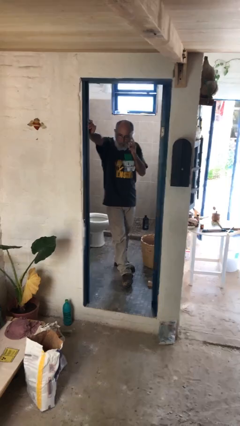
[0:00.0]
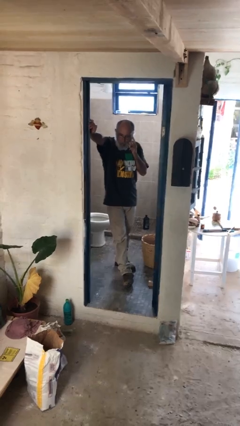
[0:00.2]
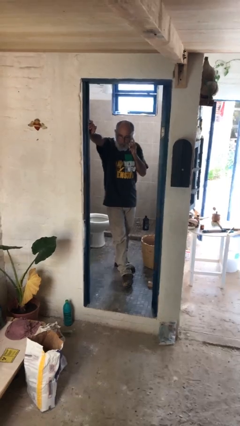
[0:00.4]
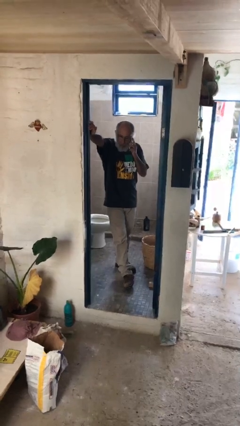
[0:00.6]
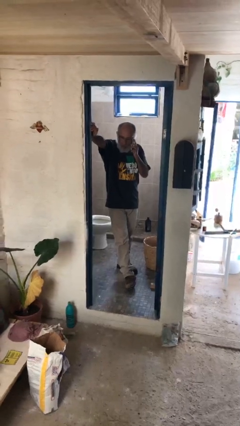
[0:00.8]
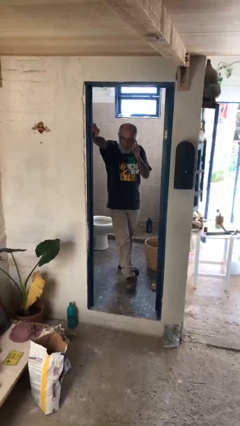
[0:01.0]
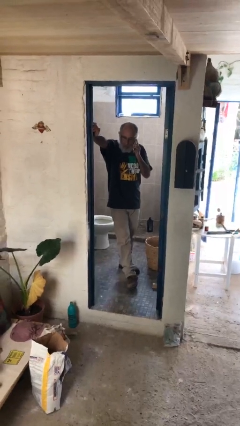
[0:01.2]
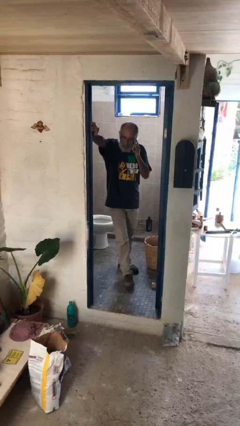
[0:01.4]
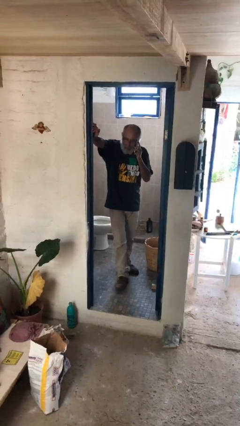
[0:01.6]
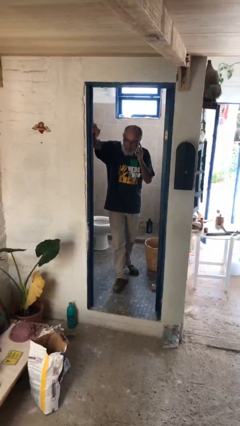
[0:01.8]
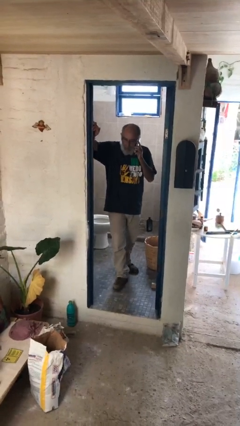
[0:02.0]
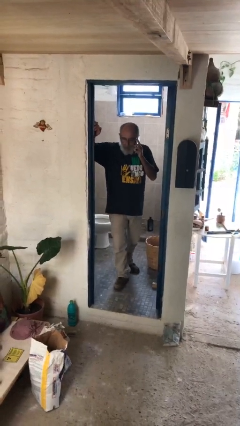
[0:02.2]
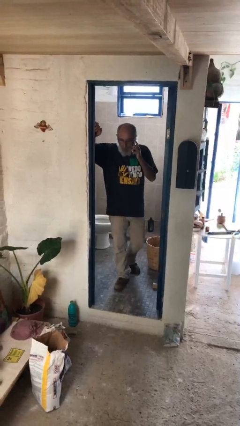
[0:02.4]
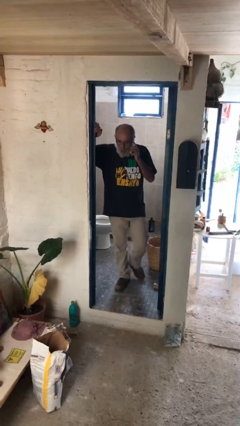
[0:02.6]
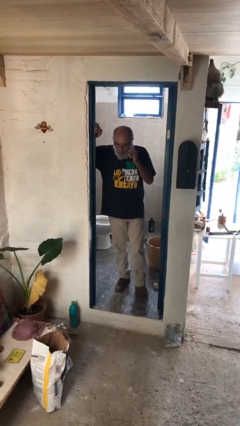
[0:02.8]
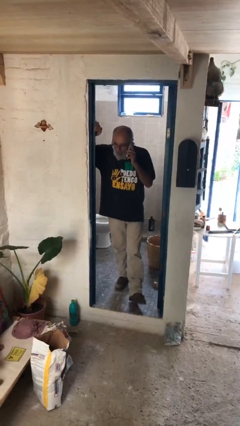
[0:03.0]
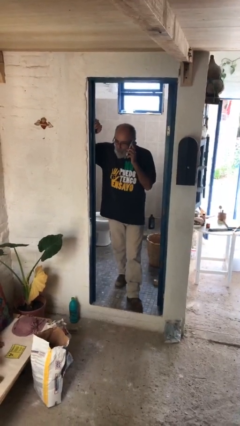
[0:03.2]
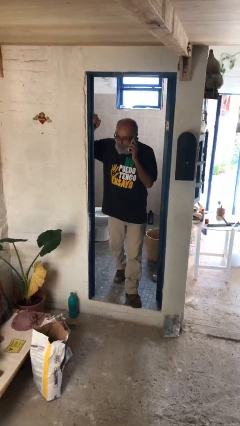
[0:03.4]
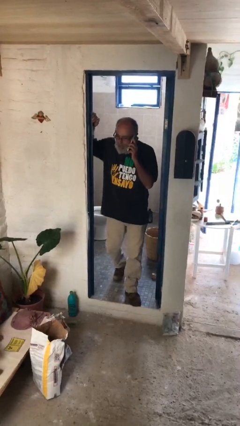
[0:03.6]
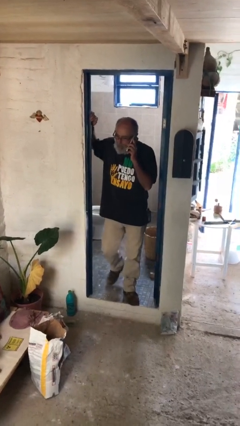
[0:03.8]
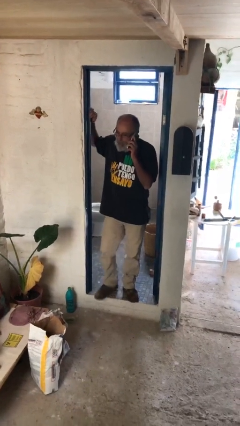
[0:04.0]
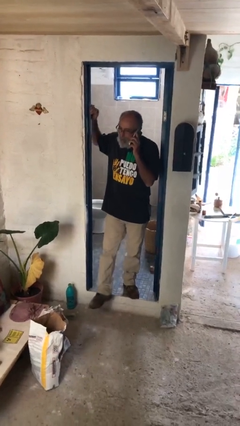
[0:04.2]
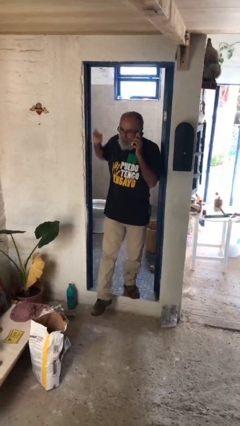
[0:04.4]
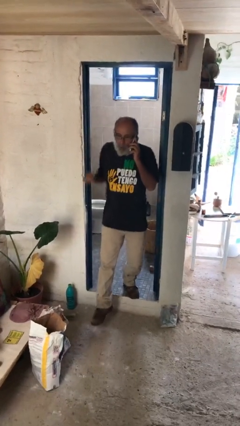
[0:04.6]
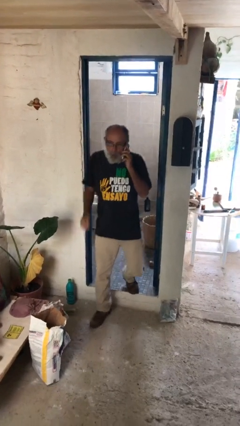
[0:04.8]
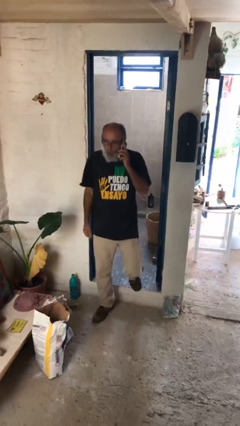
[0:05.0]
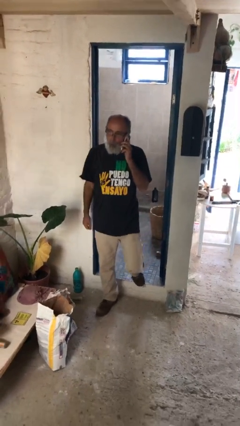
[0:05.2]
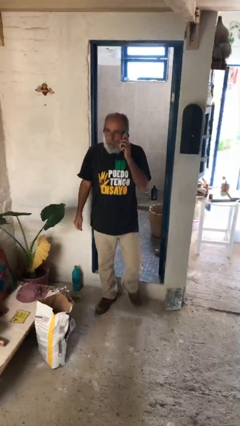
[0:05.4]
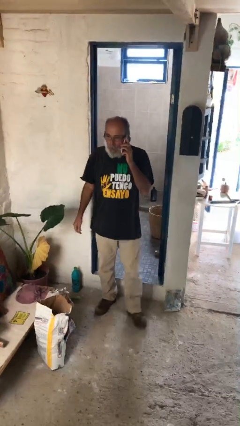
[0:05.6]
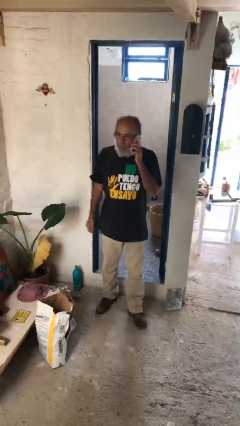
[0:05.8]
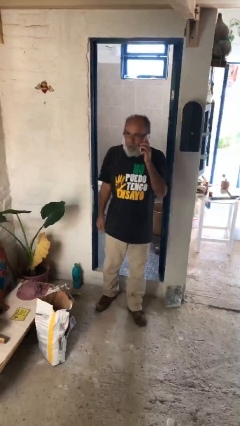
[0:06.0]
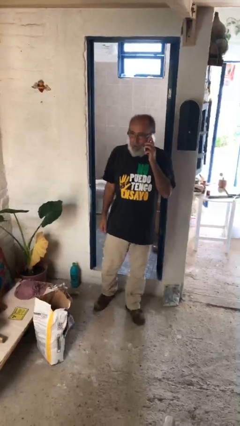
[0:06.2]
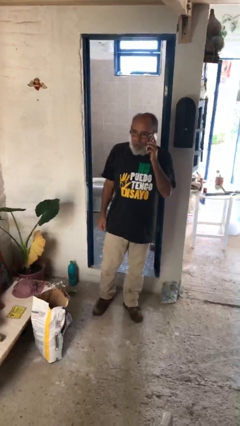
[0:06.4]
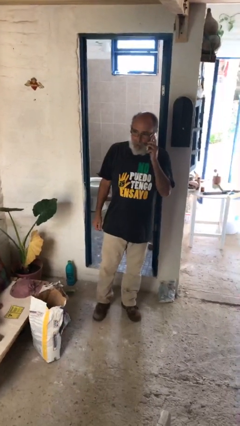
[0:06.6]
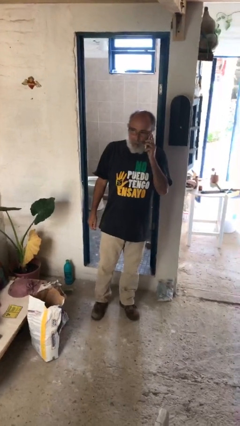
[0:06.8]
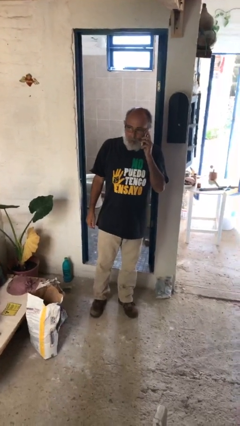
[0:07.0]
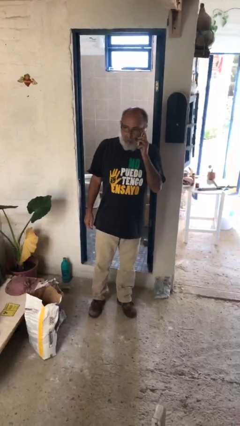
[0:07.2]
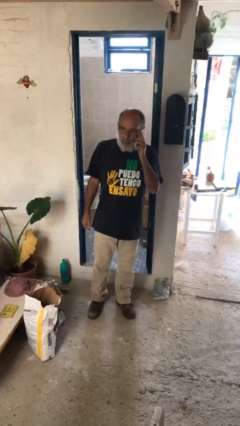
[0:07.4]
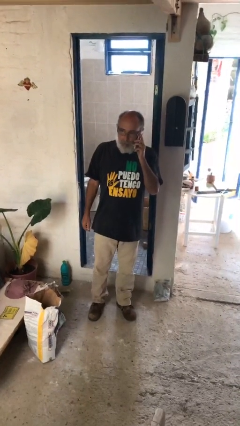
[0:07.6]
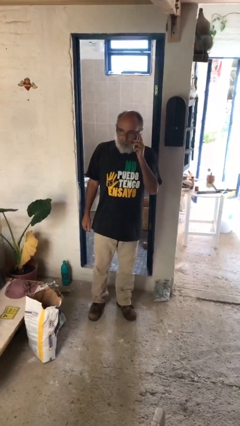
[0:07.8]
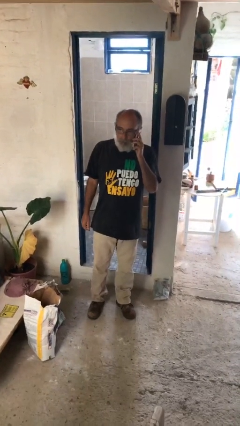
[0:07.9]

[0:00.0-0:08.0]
person enters scene through structure

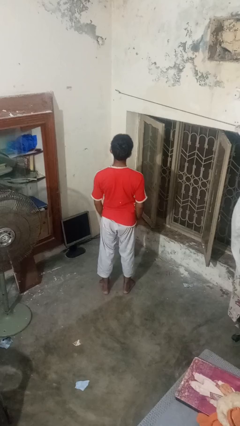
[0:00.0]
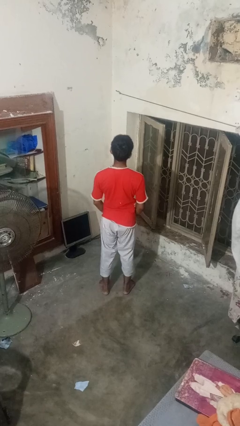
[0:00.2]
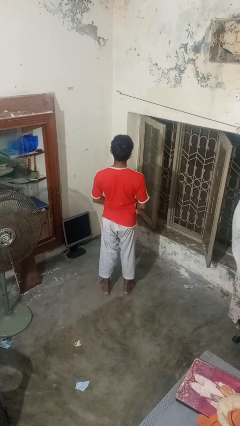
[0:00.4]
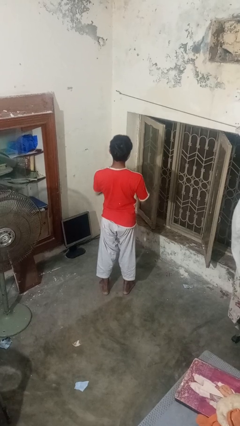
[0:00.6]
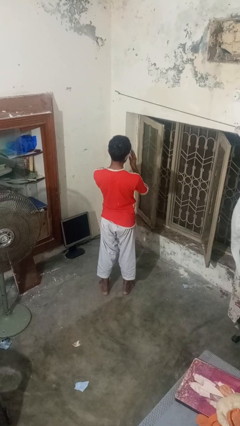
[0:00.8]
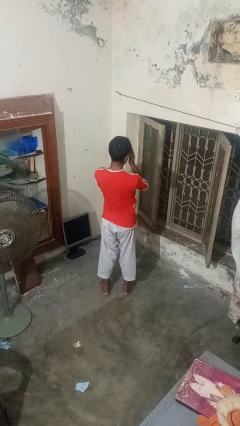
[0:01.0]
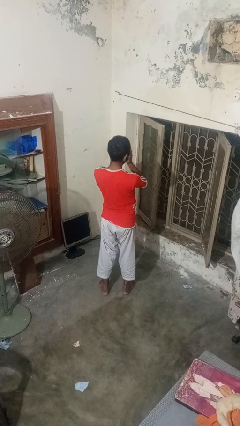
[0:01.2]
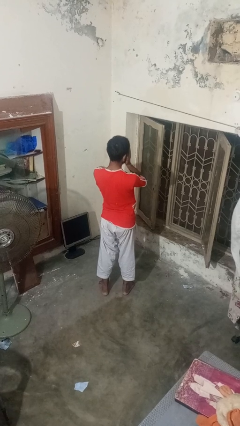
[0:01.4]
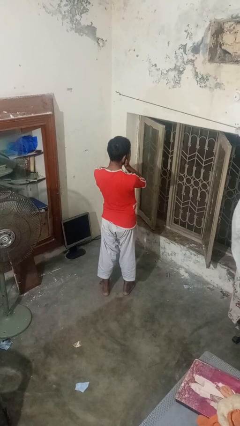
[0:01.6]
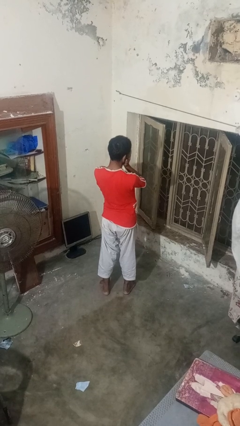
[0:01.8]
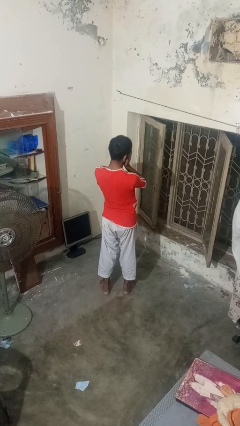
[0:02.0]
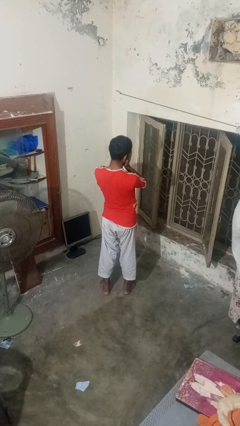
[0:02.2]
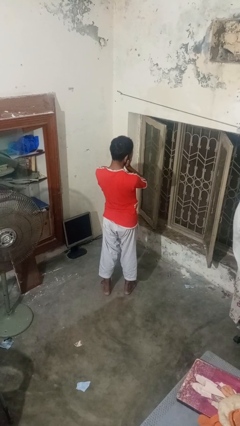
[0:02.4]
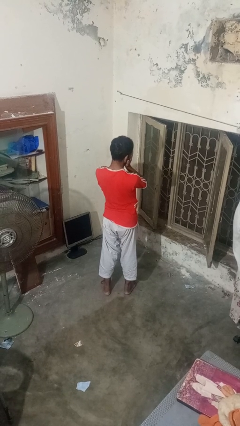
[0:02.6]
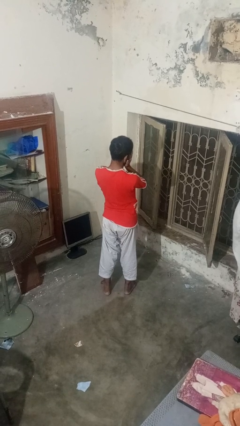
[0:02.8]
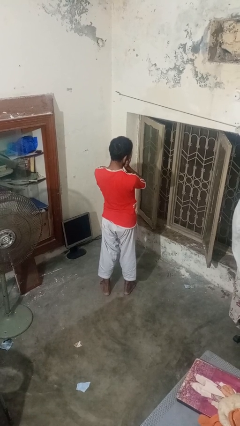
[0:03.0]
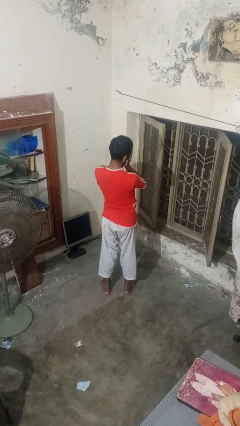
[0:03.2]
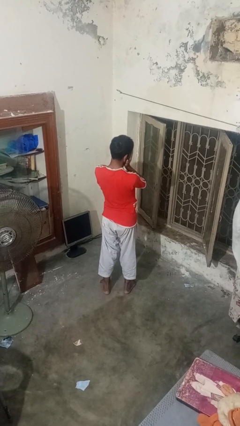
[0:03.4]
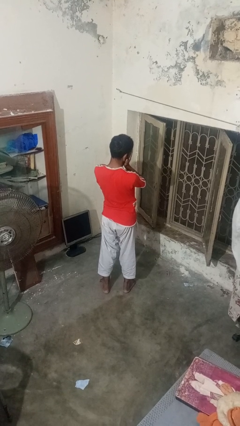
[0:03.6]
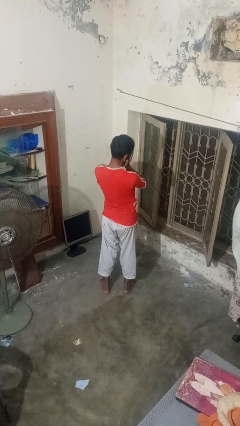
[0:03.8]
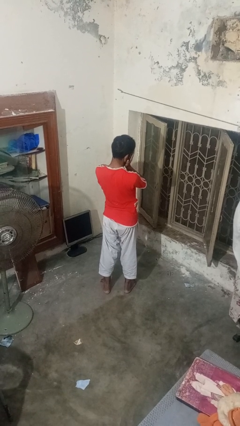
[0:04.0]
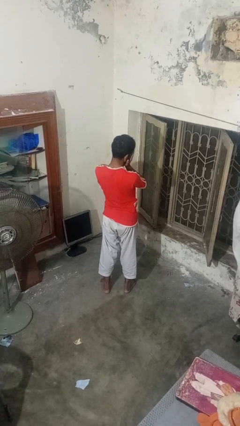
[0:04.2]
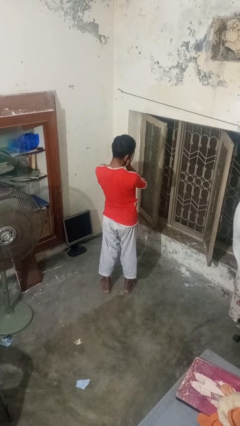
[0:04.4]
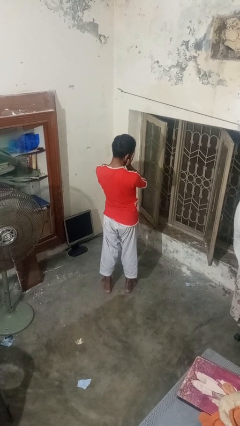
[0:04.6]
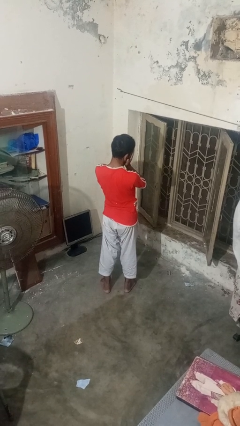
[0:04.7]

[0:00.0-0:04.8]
person covers face with hands

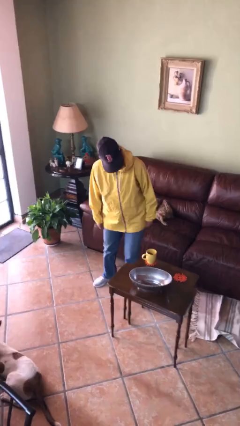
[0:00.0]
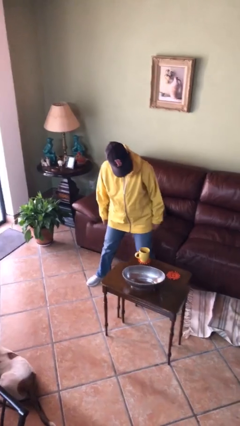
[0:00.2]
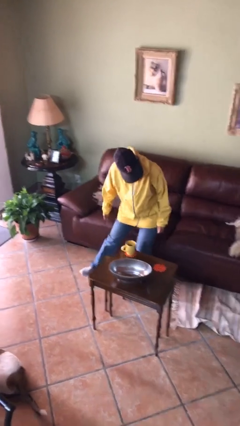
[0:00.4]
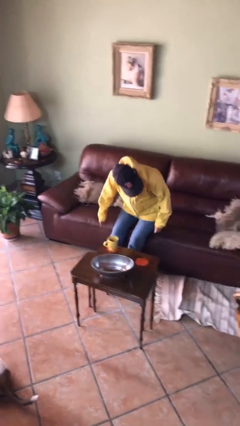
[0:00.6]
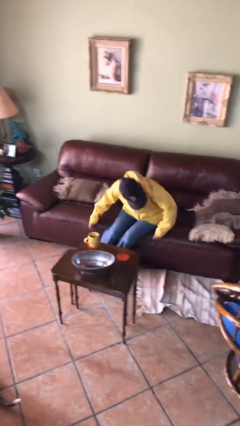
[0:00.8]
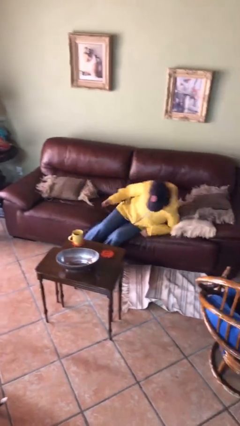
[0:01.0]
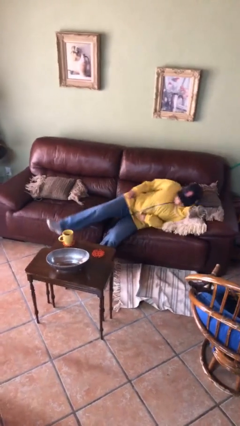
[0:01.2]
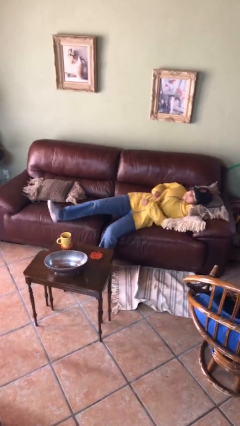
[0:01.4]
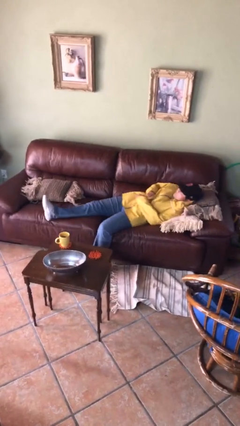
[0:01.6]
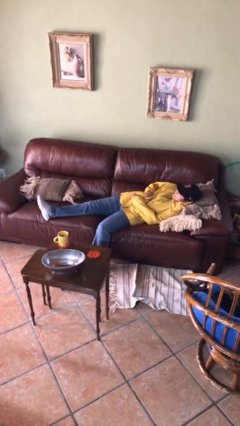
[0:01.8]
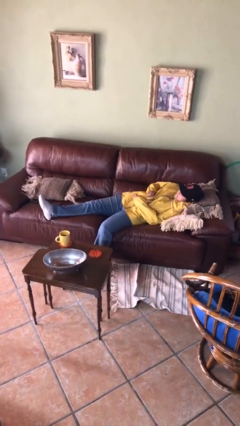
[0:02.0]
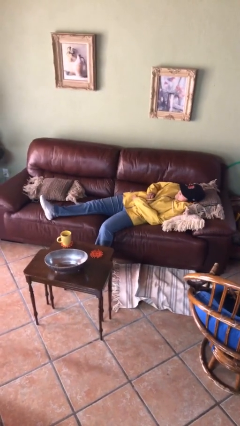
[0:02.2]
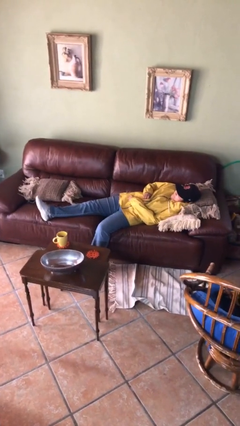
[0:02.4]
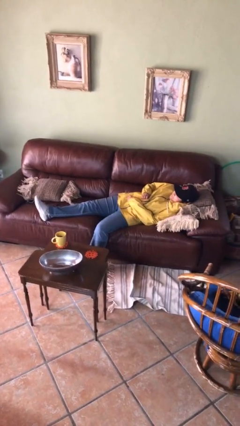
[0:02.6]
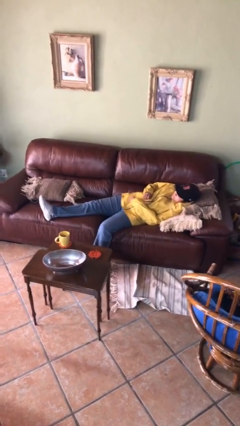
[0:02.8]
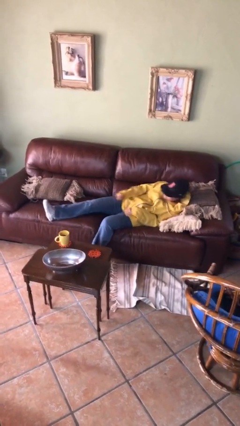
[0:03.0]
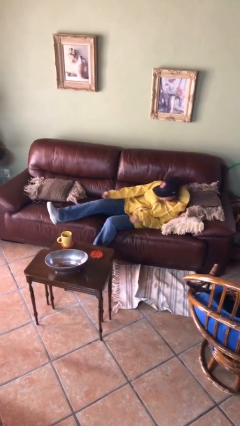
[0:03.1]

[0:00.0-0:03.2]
person lies down on couch

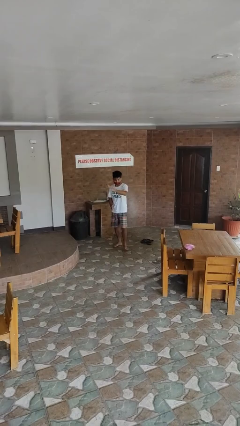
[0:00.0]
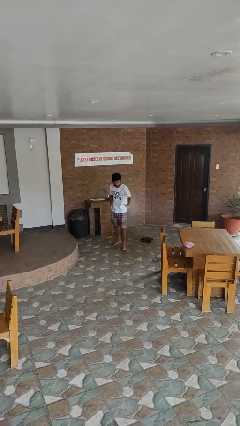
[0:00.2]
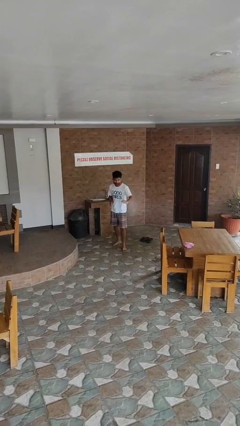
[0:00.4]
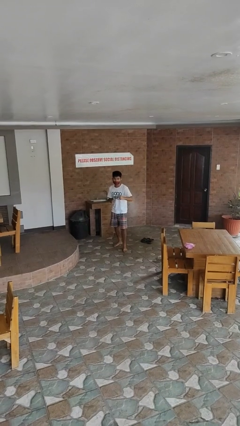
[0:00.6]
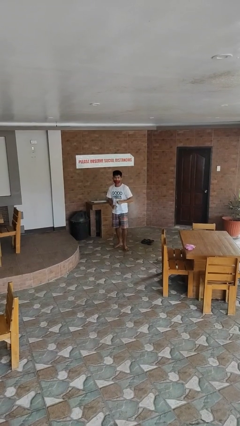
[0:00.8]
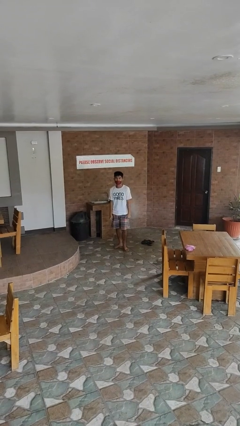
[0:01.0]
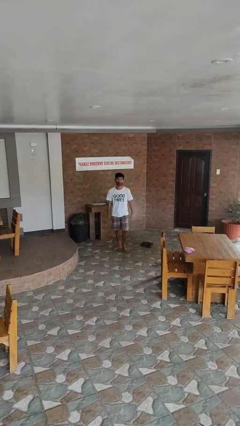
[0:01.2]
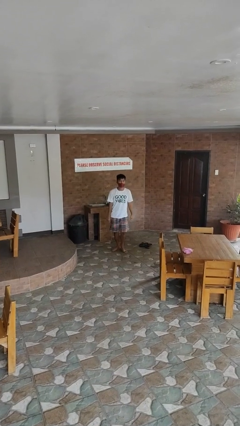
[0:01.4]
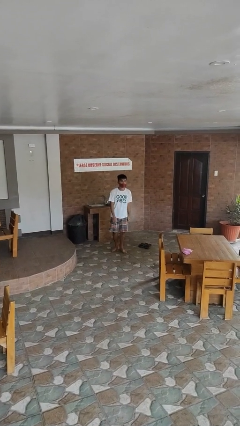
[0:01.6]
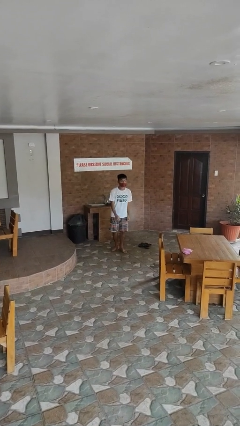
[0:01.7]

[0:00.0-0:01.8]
person karate chop

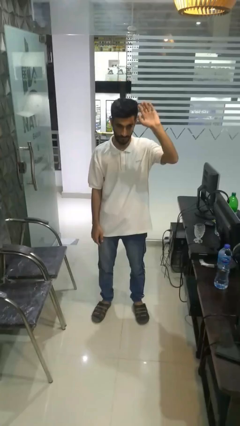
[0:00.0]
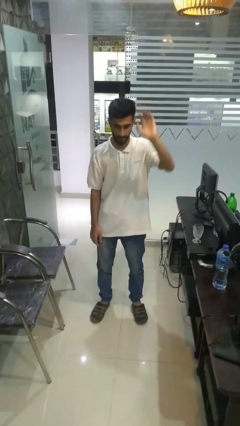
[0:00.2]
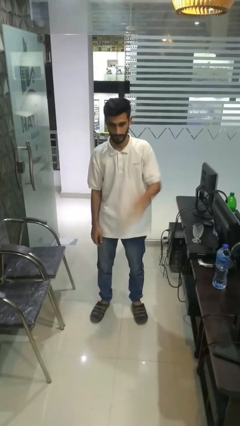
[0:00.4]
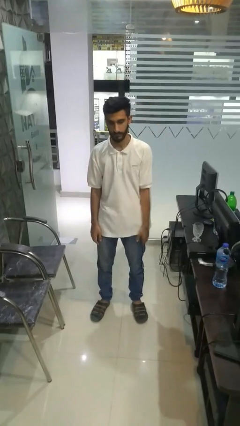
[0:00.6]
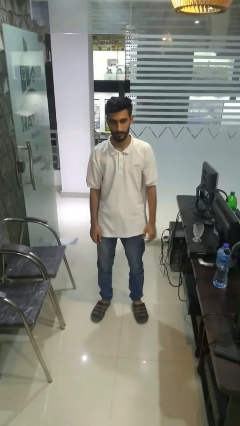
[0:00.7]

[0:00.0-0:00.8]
person gestures lower hand
